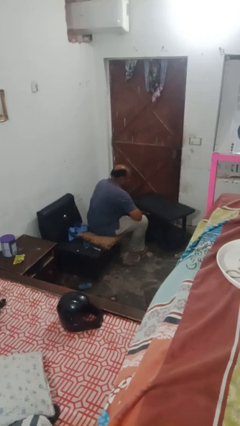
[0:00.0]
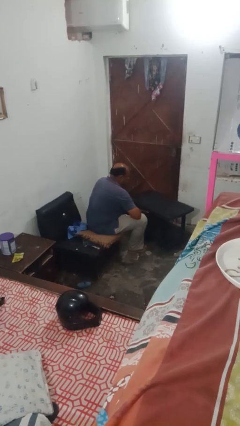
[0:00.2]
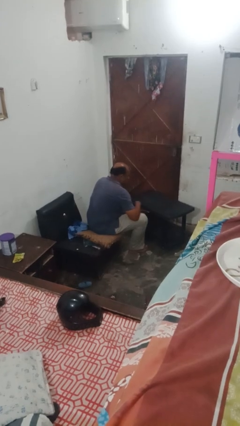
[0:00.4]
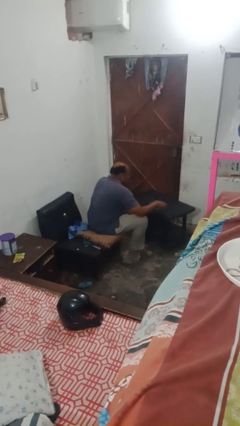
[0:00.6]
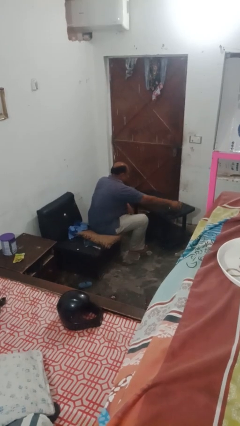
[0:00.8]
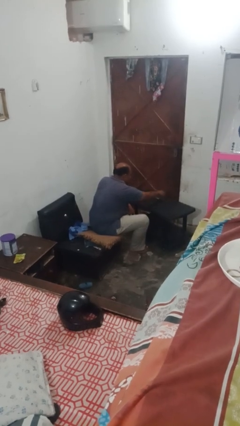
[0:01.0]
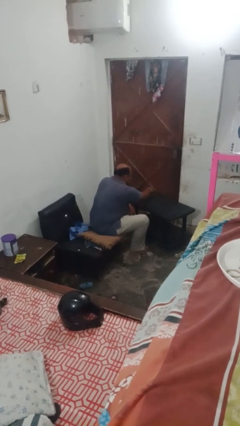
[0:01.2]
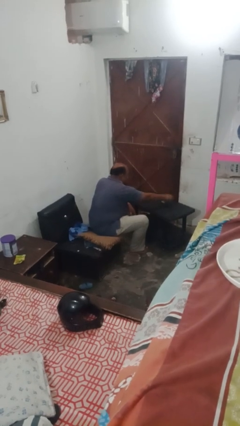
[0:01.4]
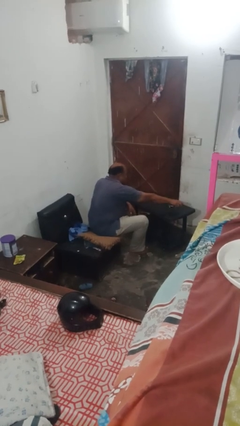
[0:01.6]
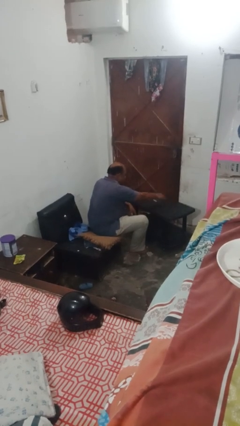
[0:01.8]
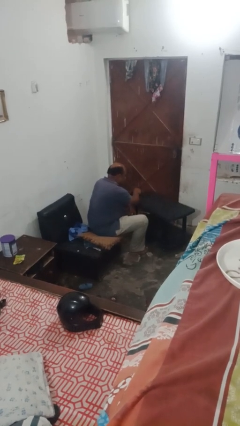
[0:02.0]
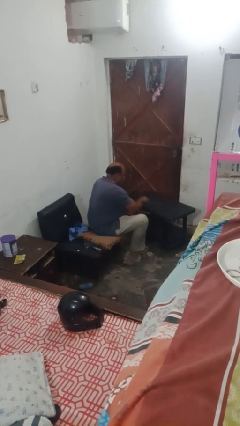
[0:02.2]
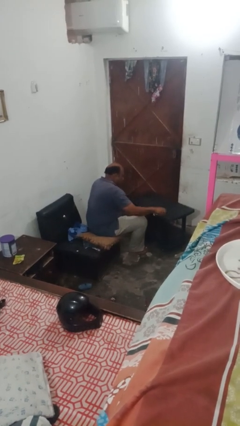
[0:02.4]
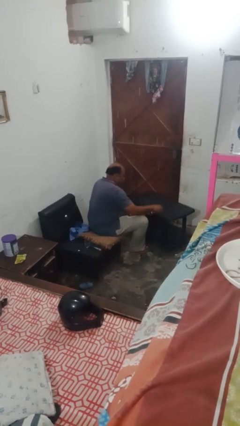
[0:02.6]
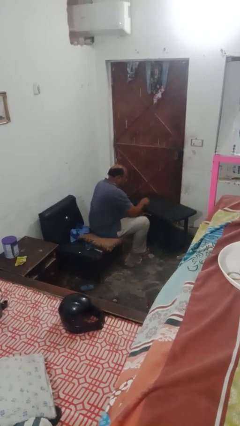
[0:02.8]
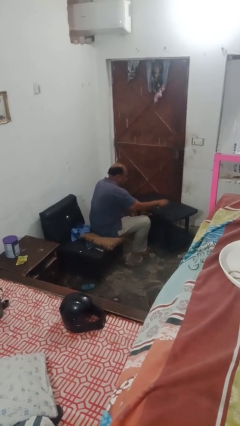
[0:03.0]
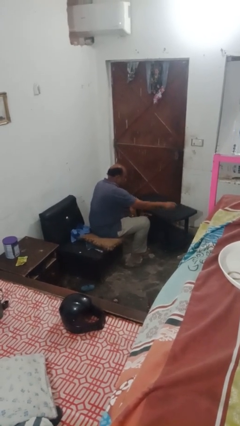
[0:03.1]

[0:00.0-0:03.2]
person sprays from bottle

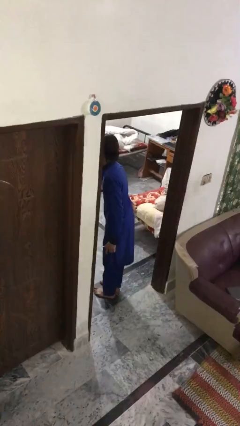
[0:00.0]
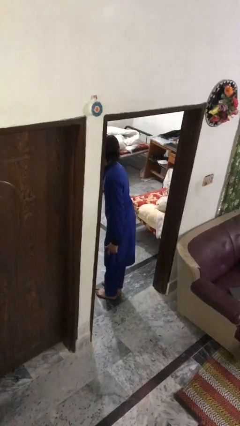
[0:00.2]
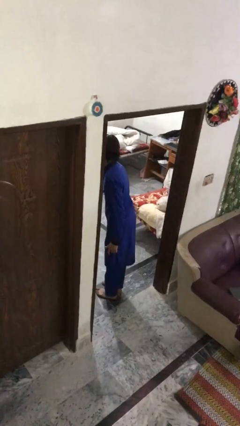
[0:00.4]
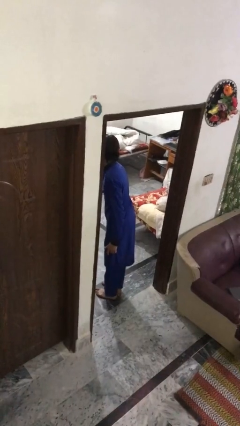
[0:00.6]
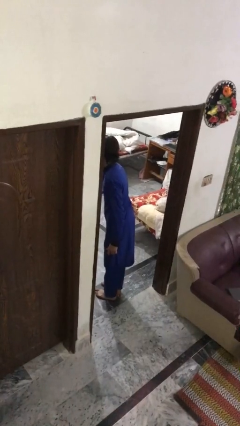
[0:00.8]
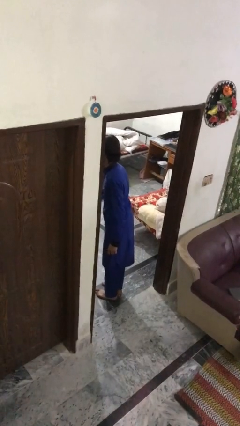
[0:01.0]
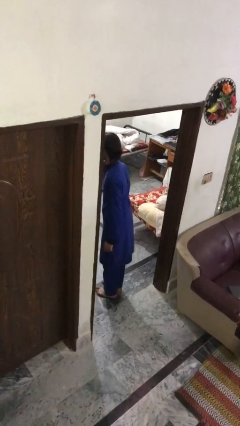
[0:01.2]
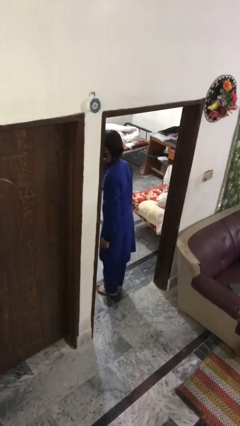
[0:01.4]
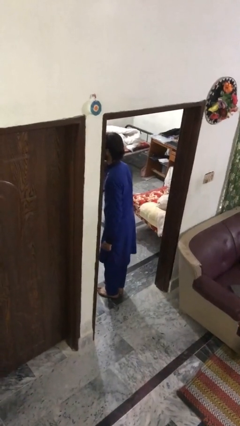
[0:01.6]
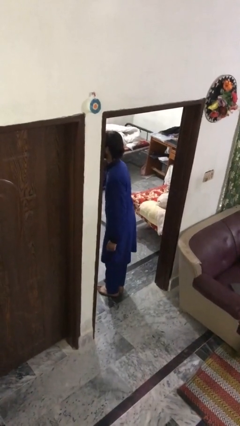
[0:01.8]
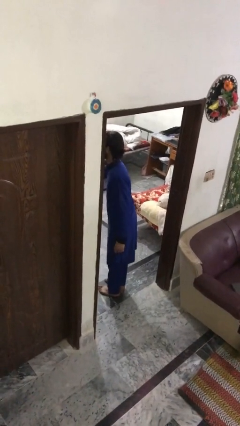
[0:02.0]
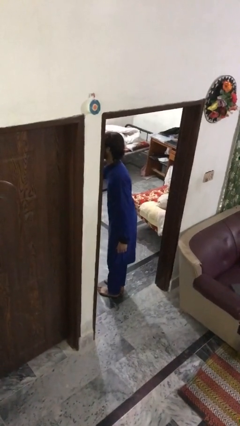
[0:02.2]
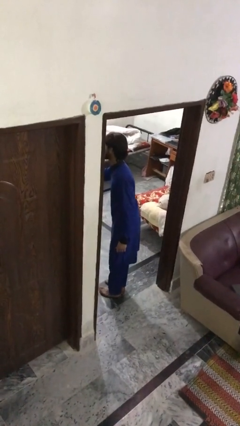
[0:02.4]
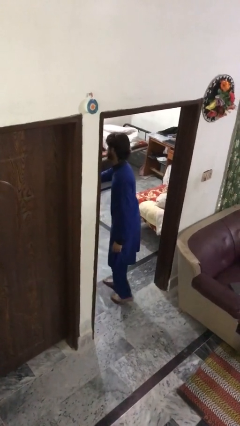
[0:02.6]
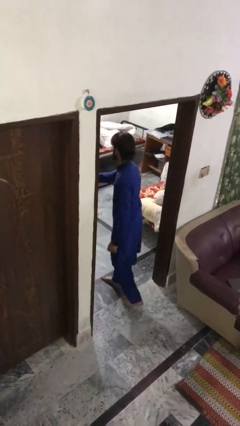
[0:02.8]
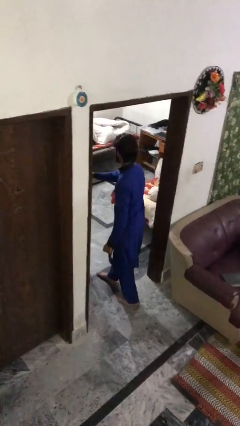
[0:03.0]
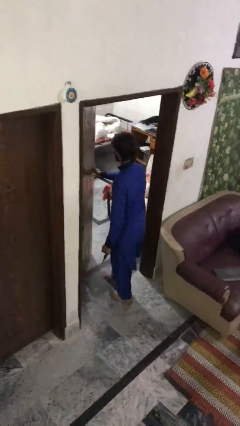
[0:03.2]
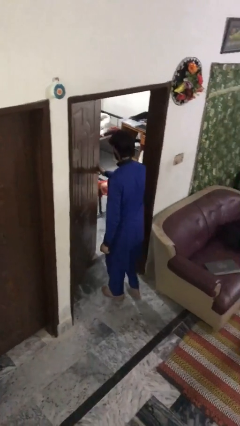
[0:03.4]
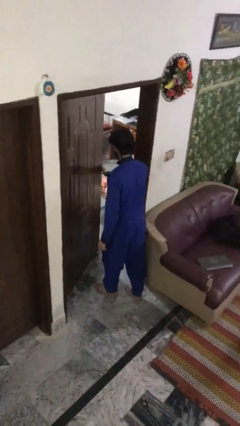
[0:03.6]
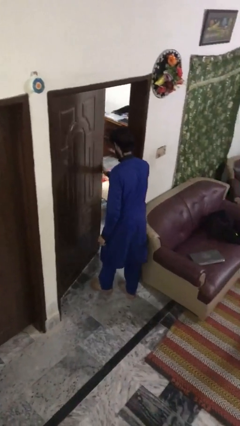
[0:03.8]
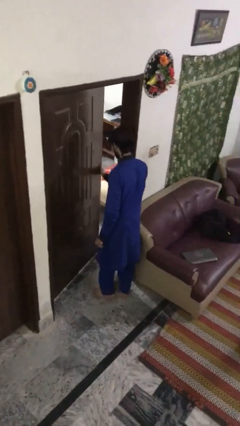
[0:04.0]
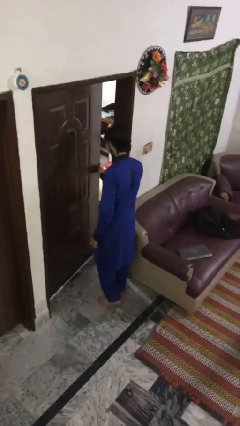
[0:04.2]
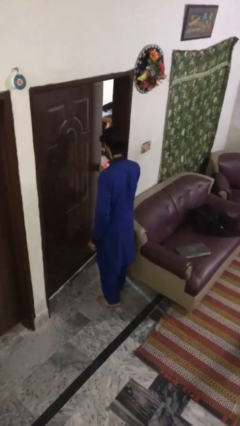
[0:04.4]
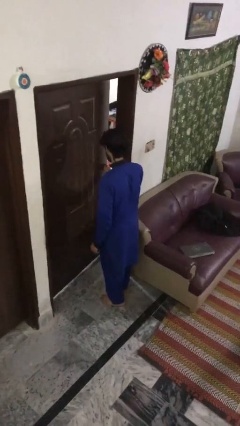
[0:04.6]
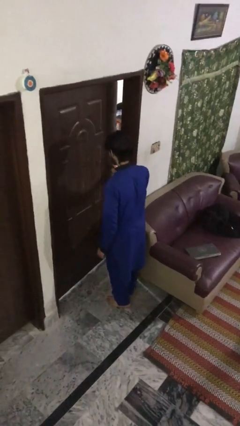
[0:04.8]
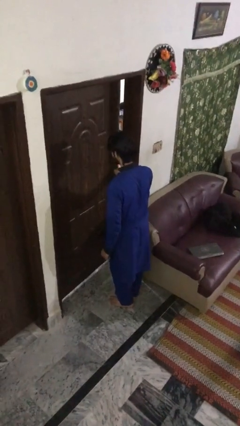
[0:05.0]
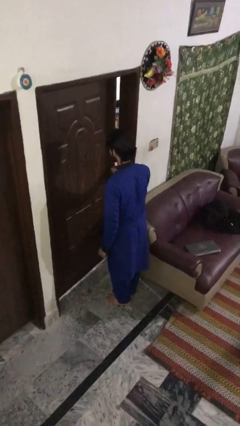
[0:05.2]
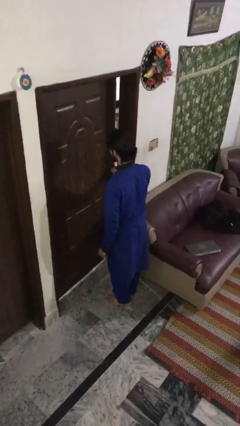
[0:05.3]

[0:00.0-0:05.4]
person closes facility door

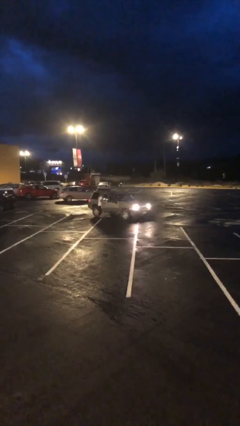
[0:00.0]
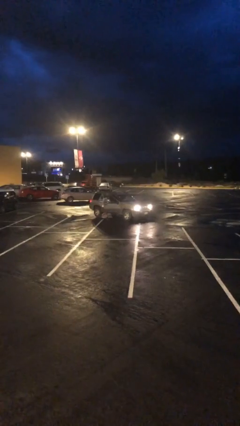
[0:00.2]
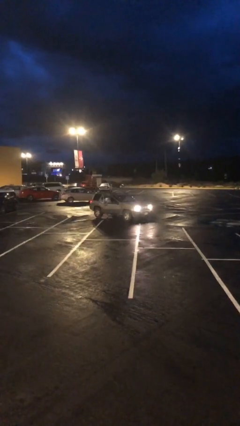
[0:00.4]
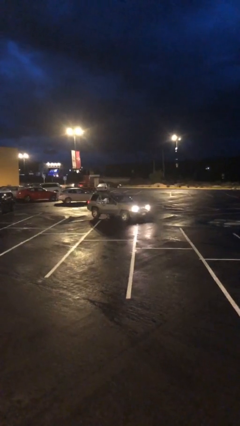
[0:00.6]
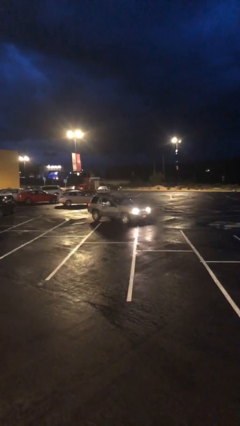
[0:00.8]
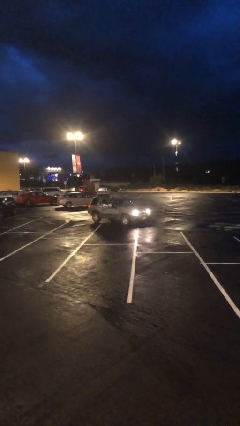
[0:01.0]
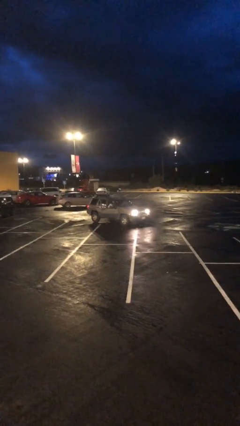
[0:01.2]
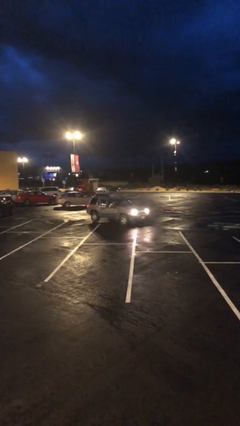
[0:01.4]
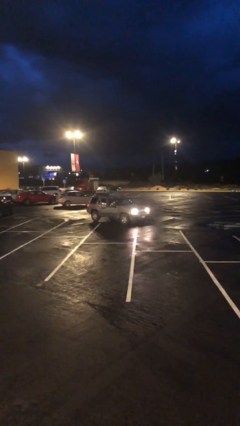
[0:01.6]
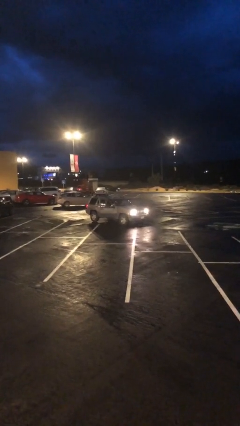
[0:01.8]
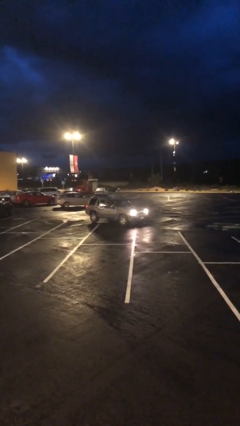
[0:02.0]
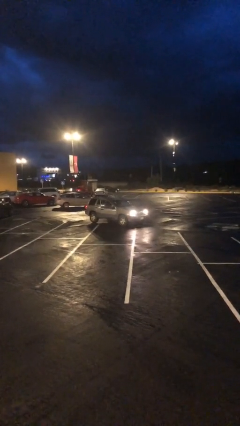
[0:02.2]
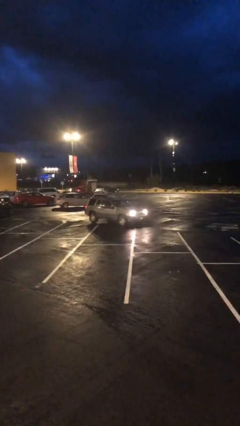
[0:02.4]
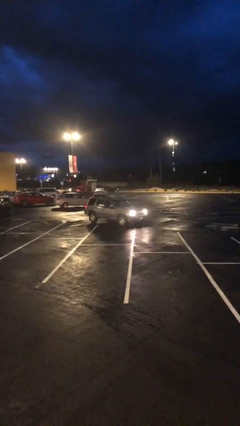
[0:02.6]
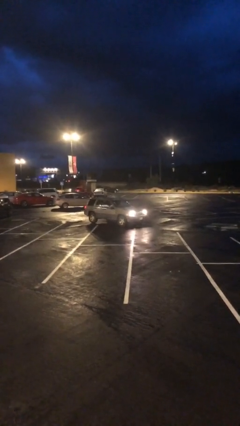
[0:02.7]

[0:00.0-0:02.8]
car picks up person

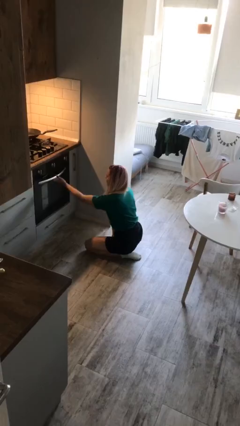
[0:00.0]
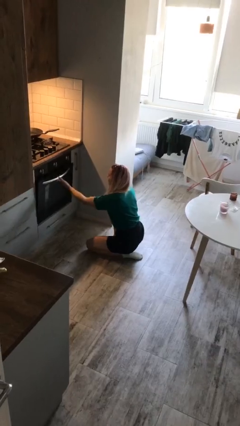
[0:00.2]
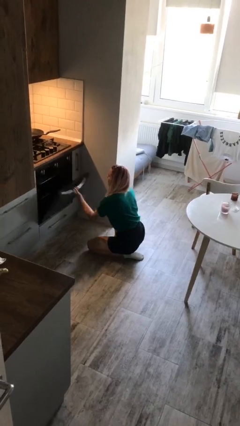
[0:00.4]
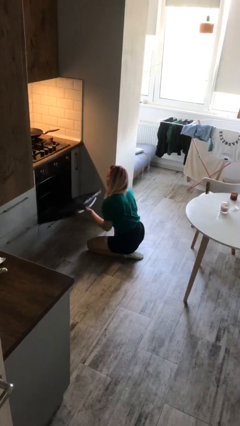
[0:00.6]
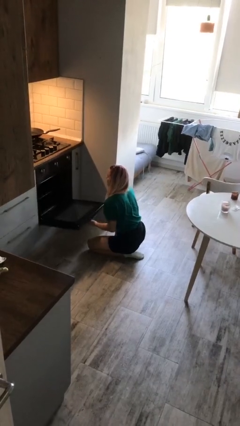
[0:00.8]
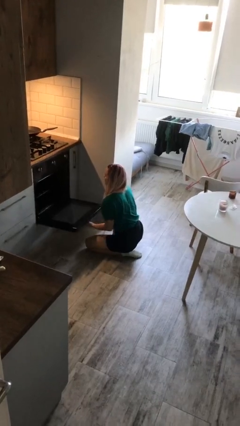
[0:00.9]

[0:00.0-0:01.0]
person opens oven door

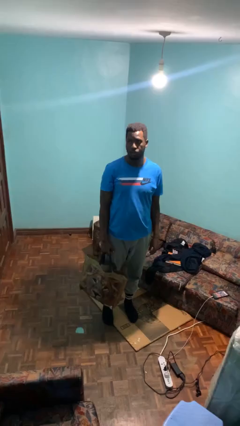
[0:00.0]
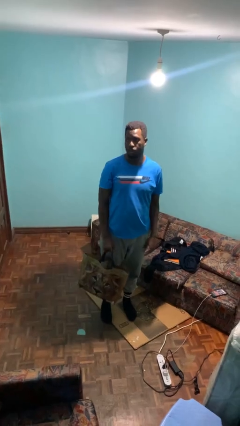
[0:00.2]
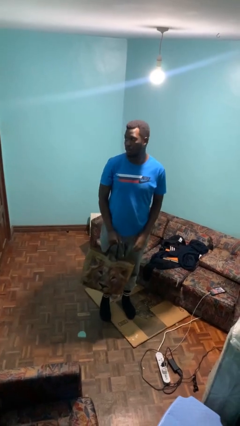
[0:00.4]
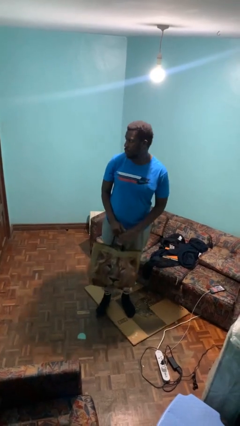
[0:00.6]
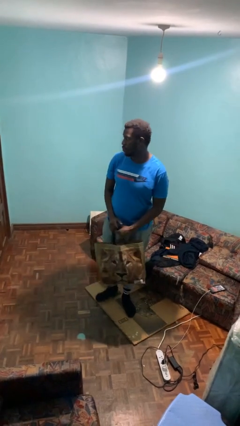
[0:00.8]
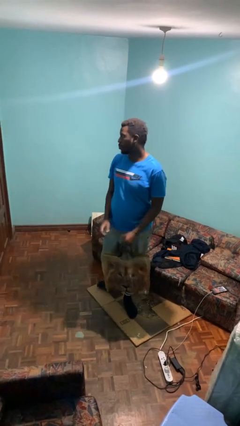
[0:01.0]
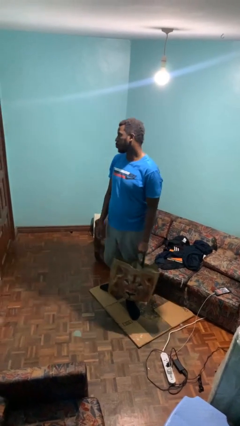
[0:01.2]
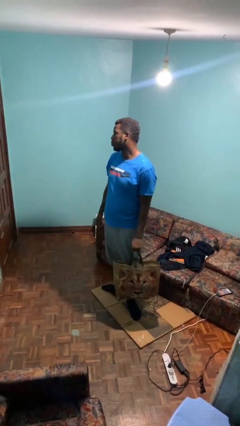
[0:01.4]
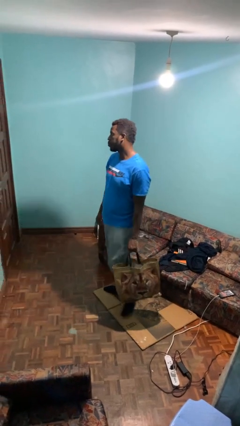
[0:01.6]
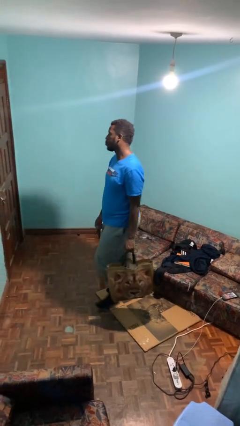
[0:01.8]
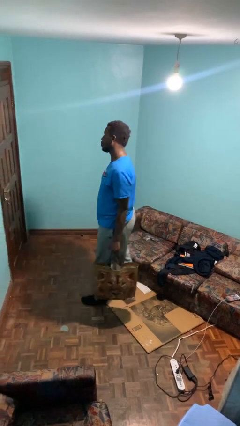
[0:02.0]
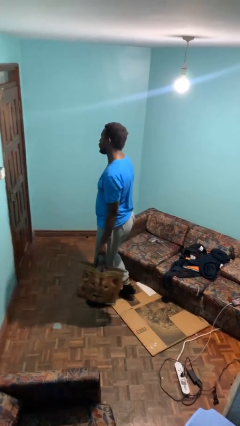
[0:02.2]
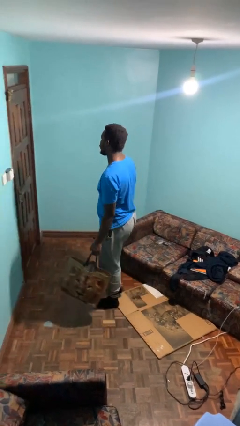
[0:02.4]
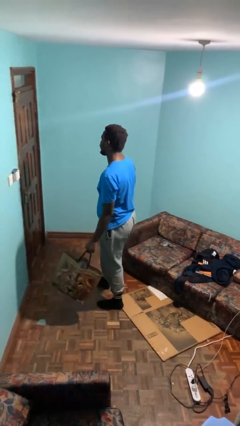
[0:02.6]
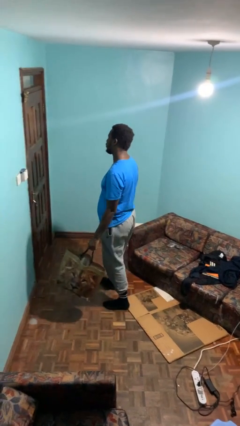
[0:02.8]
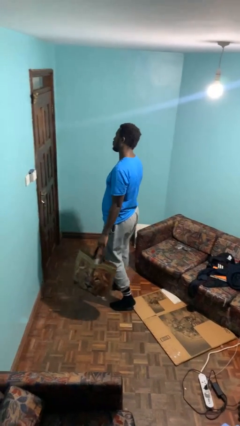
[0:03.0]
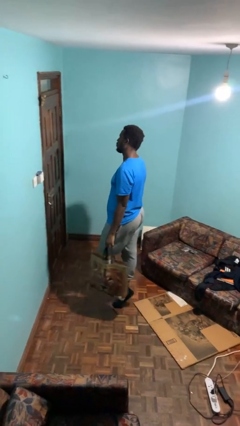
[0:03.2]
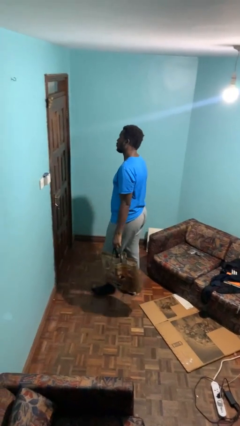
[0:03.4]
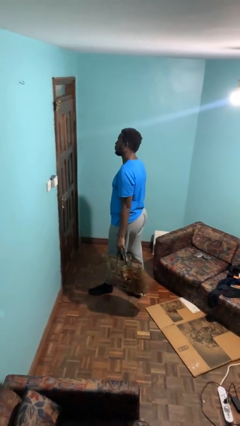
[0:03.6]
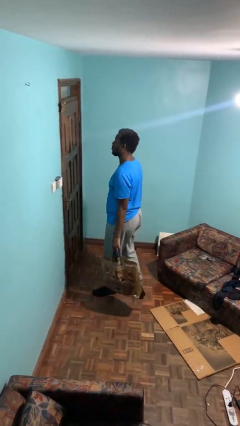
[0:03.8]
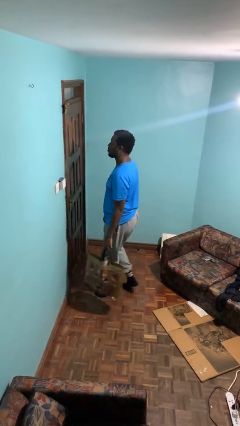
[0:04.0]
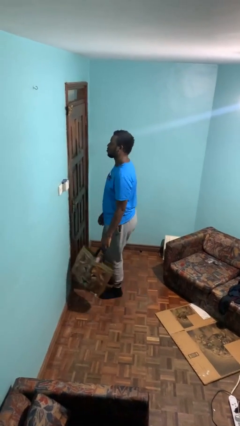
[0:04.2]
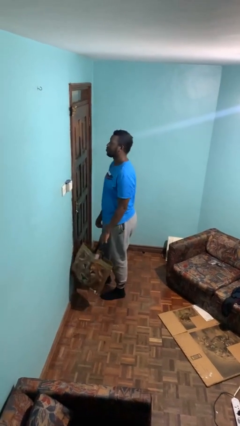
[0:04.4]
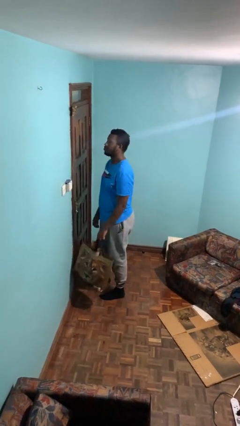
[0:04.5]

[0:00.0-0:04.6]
person carries groceries

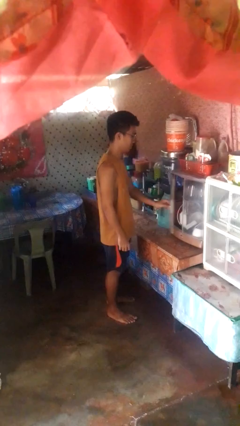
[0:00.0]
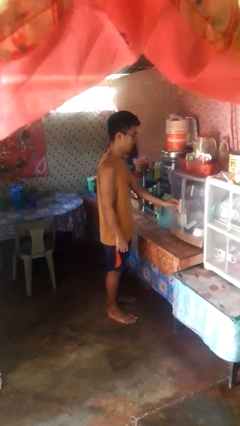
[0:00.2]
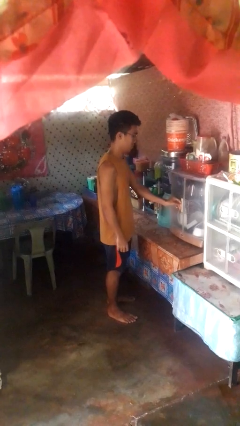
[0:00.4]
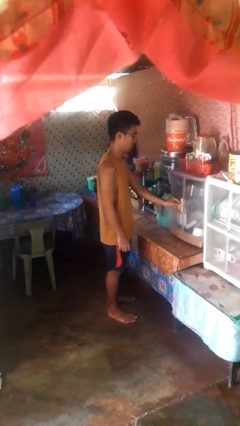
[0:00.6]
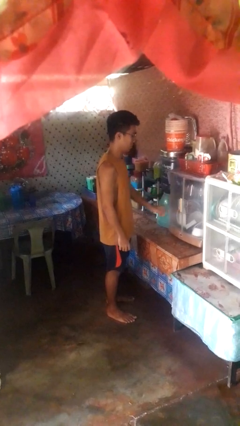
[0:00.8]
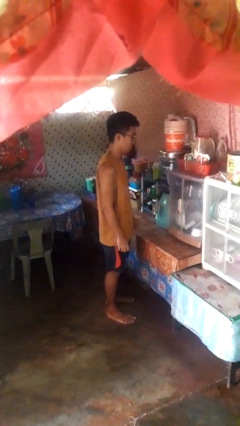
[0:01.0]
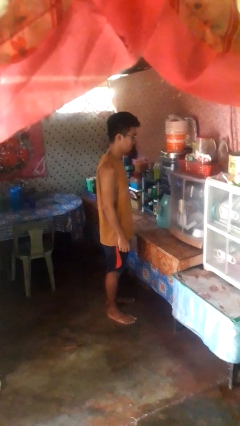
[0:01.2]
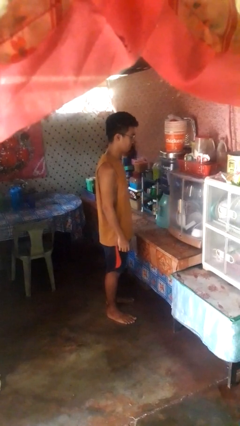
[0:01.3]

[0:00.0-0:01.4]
person closes cabinet
